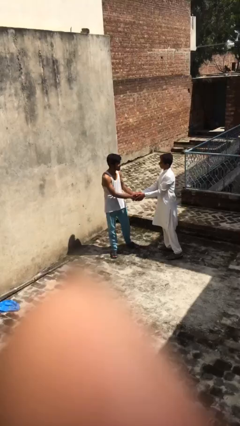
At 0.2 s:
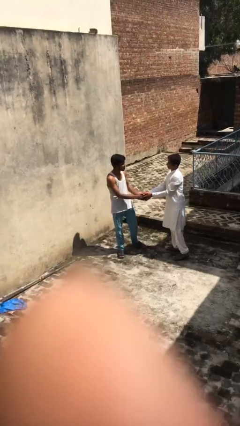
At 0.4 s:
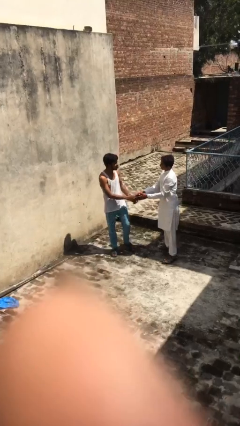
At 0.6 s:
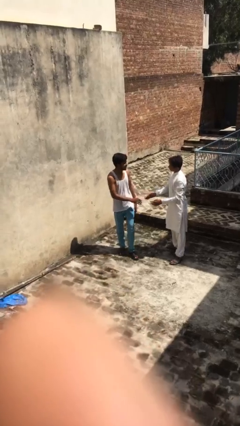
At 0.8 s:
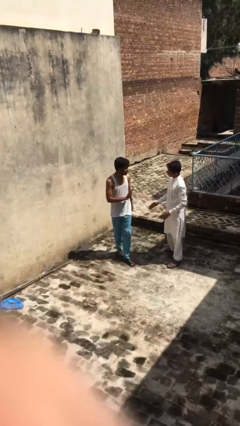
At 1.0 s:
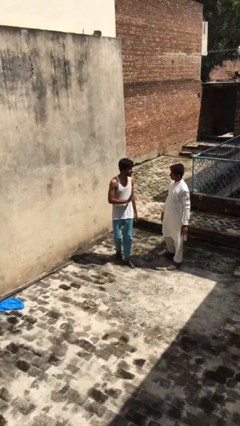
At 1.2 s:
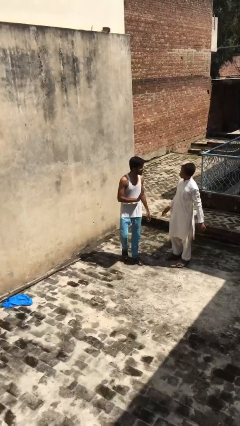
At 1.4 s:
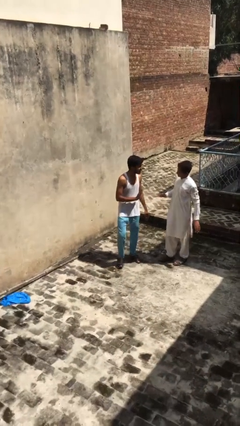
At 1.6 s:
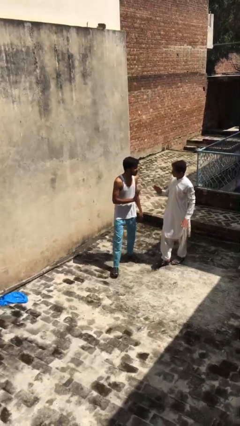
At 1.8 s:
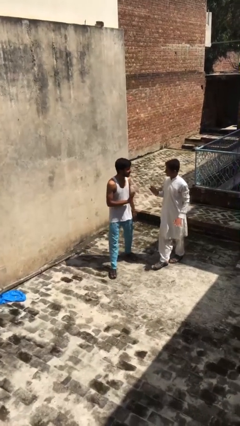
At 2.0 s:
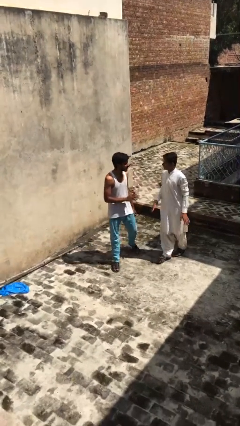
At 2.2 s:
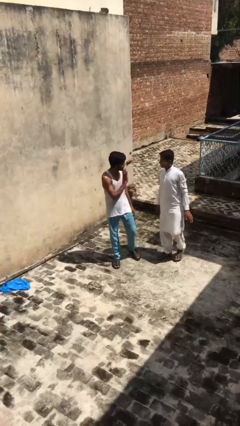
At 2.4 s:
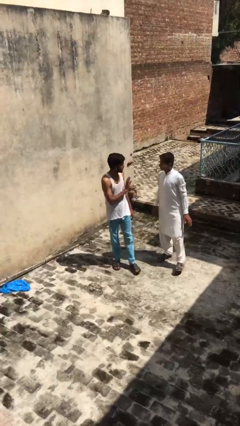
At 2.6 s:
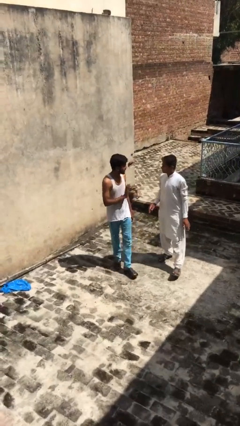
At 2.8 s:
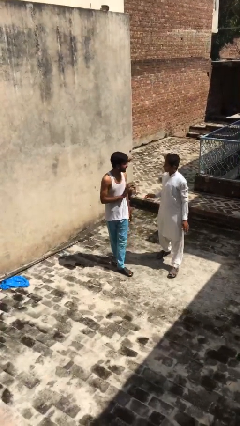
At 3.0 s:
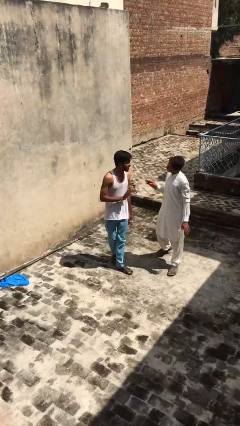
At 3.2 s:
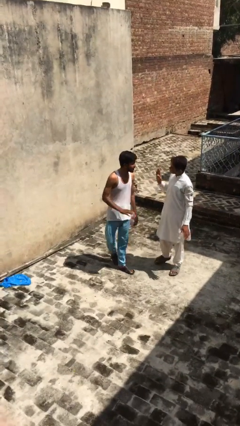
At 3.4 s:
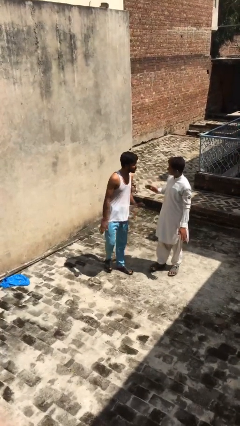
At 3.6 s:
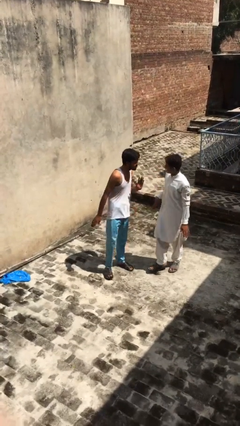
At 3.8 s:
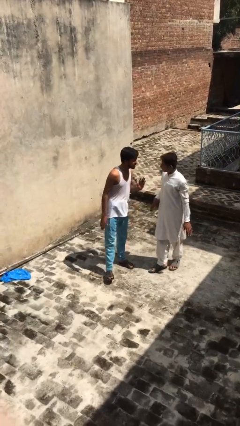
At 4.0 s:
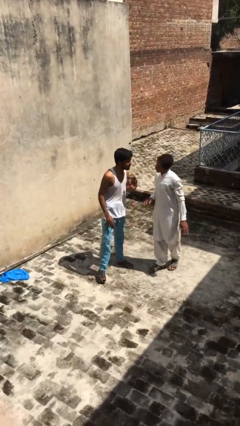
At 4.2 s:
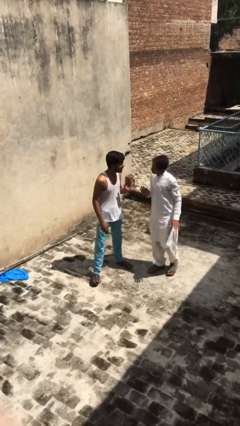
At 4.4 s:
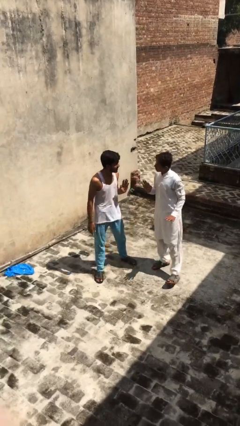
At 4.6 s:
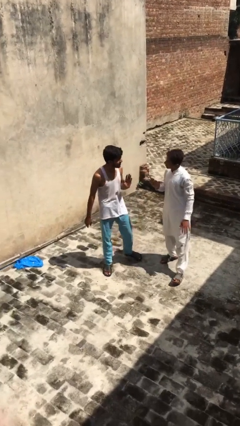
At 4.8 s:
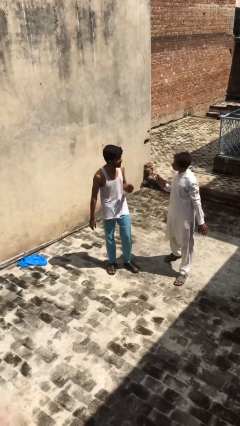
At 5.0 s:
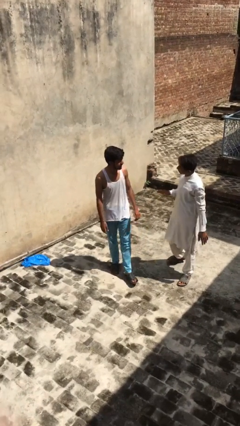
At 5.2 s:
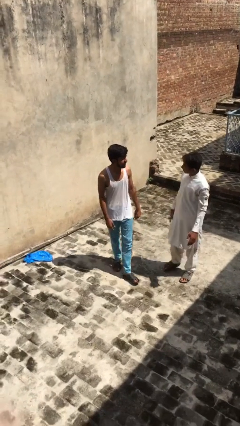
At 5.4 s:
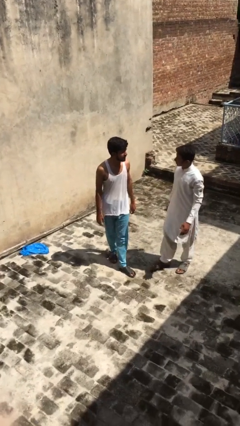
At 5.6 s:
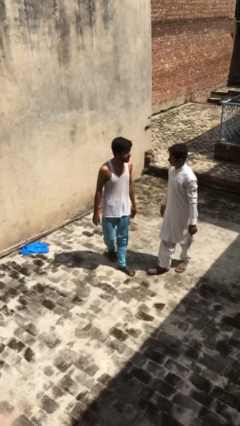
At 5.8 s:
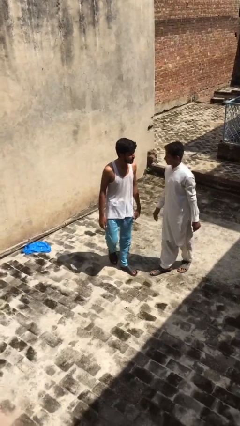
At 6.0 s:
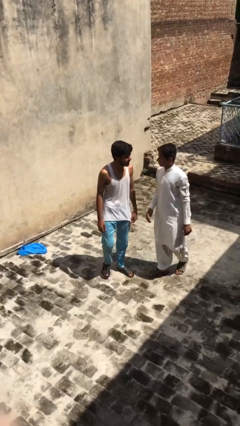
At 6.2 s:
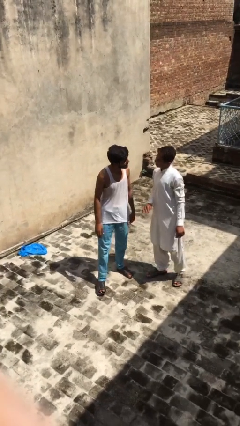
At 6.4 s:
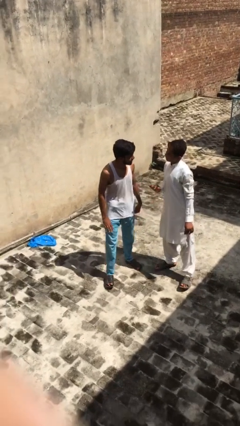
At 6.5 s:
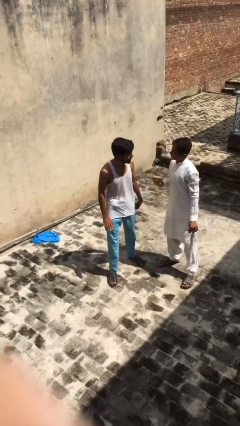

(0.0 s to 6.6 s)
person talks to person

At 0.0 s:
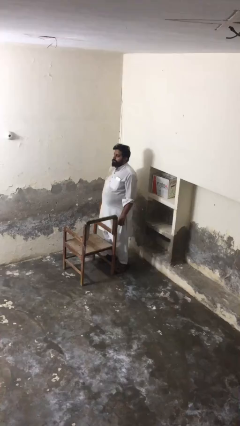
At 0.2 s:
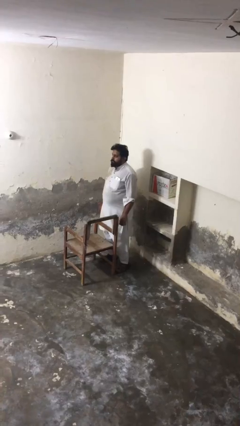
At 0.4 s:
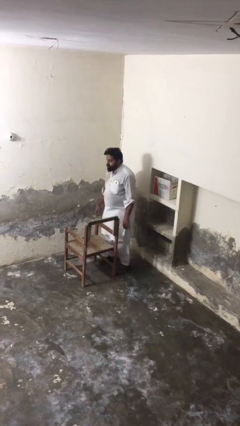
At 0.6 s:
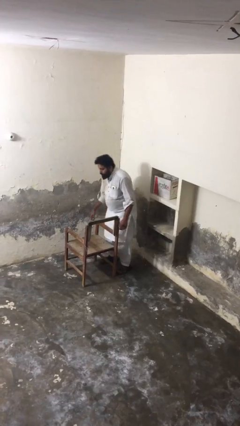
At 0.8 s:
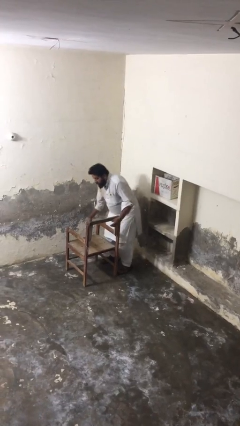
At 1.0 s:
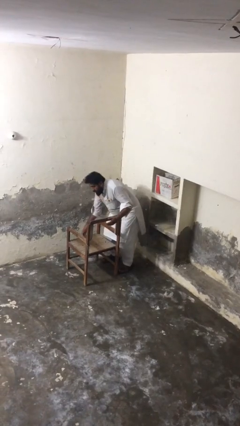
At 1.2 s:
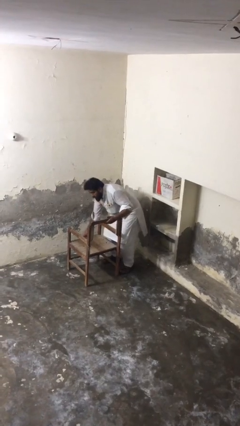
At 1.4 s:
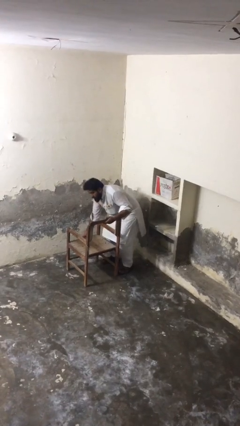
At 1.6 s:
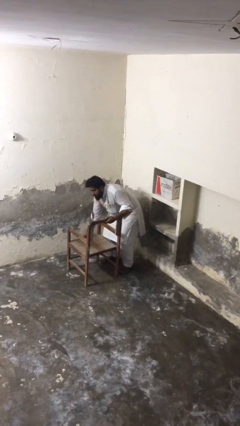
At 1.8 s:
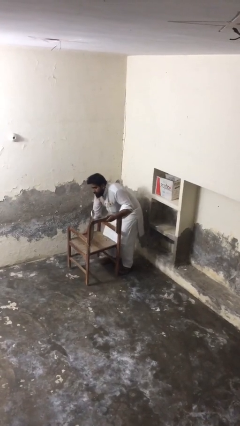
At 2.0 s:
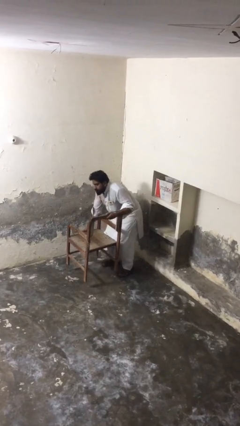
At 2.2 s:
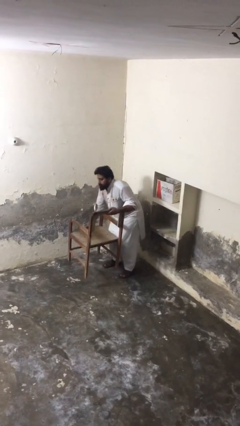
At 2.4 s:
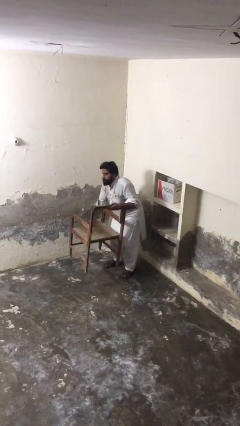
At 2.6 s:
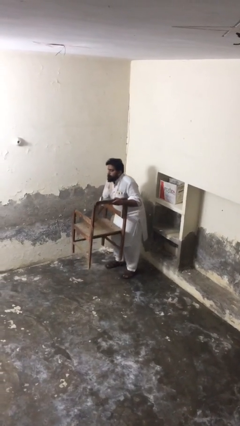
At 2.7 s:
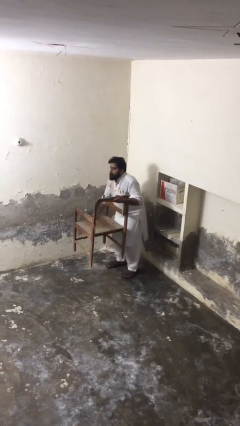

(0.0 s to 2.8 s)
person picks up object from floor

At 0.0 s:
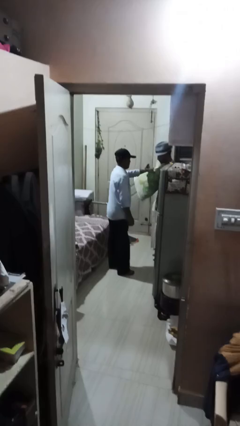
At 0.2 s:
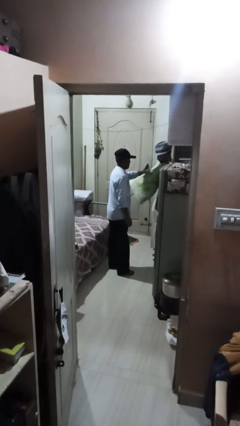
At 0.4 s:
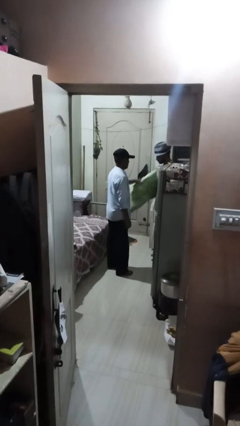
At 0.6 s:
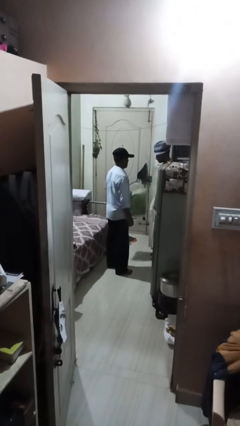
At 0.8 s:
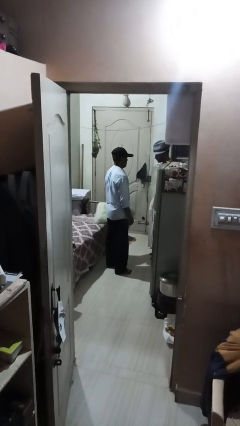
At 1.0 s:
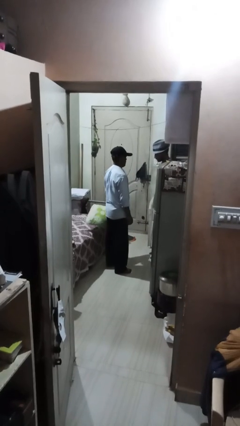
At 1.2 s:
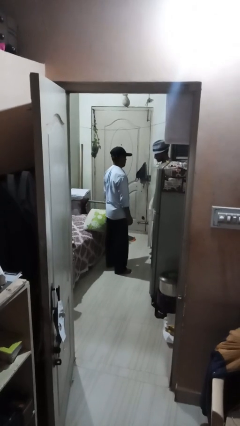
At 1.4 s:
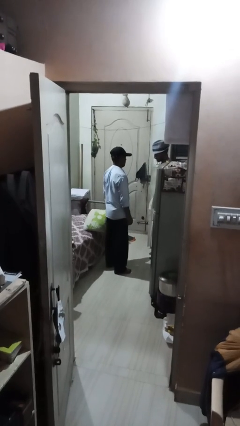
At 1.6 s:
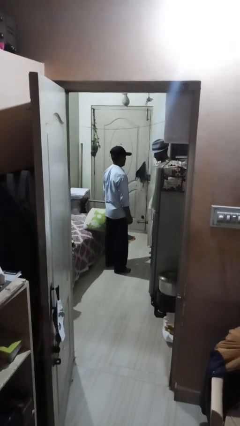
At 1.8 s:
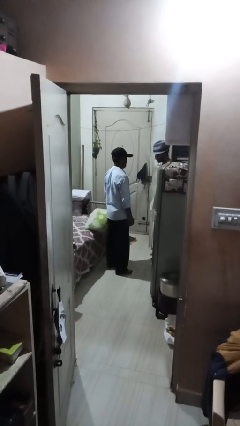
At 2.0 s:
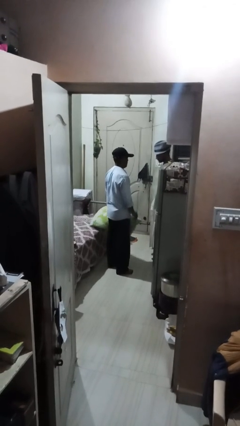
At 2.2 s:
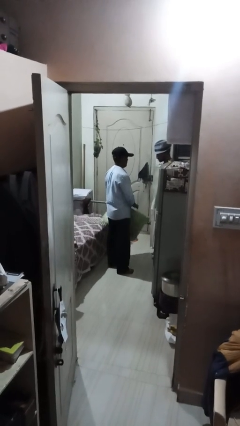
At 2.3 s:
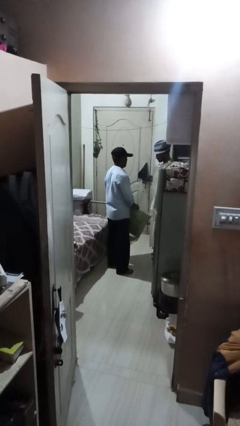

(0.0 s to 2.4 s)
person hits person with pillow

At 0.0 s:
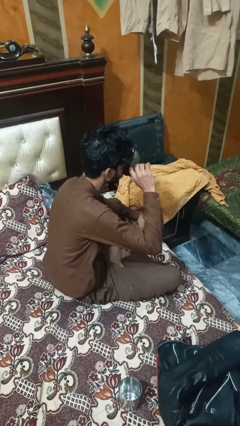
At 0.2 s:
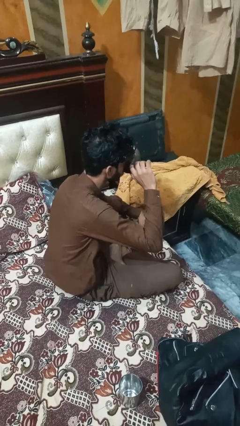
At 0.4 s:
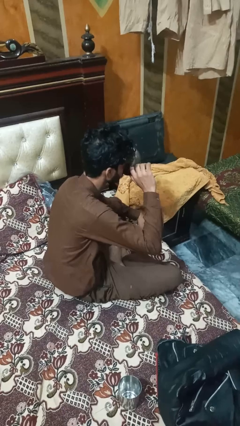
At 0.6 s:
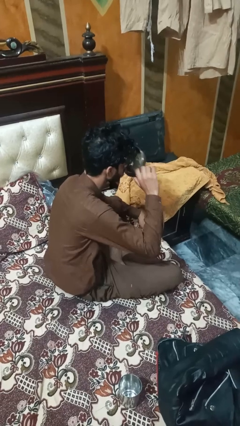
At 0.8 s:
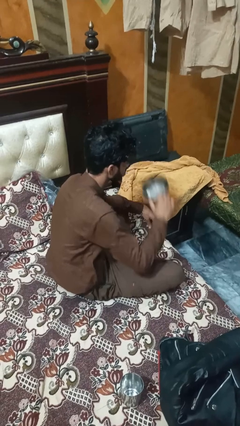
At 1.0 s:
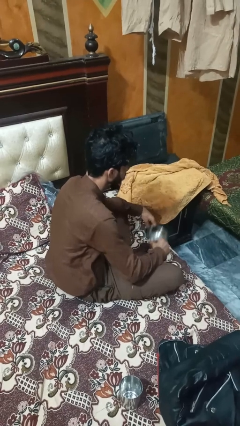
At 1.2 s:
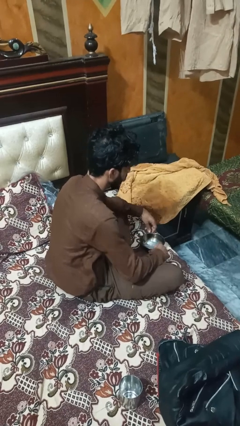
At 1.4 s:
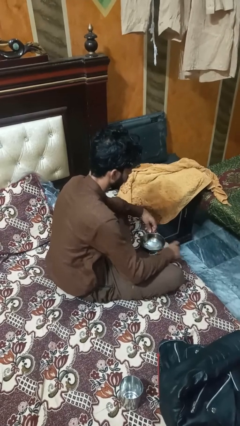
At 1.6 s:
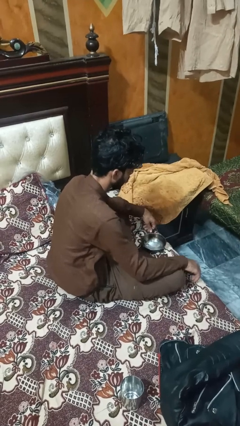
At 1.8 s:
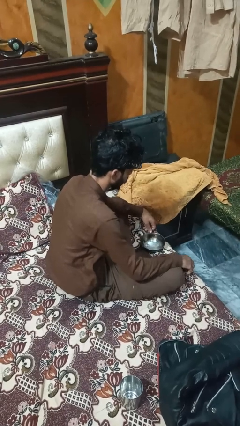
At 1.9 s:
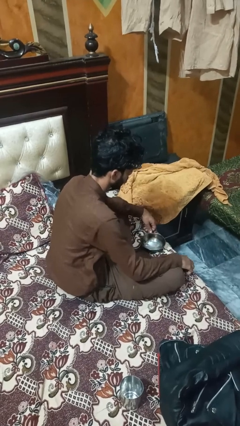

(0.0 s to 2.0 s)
person puts down object on table

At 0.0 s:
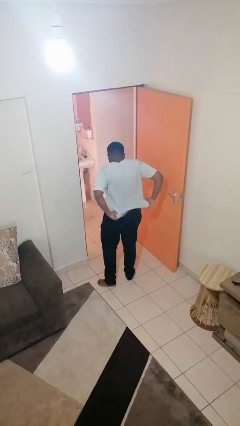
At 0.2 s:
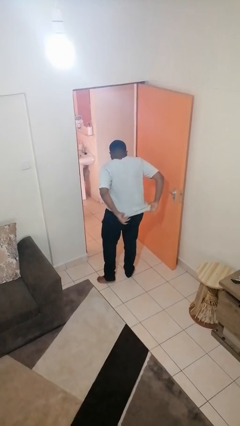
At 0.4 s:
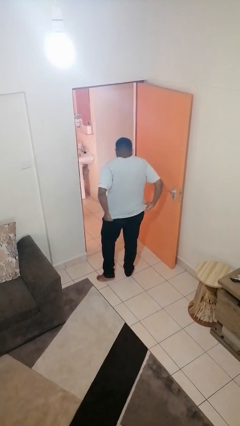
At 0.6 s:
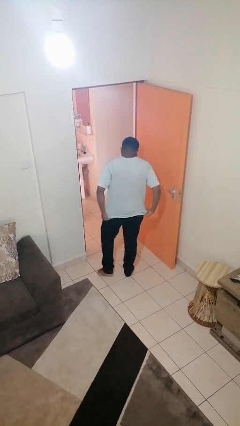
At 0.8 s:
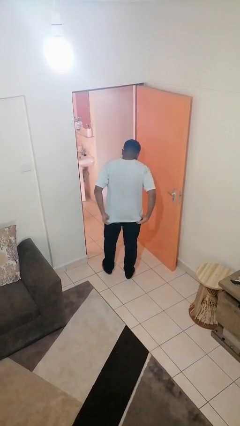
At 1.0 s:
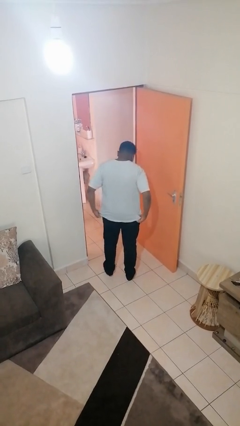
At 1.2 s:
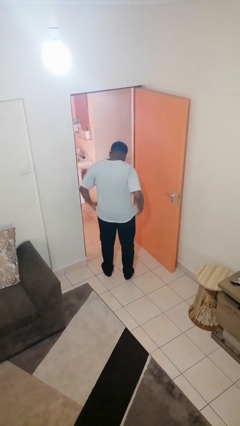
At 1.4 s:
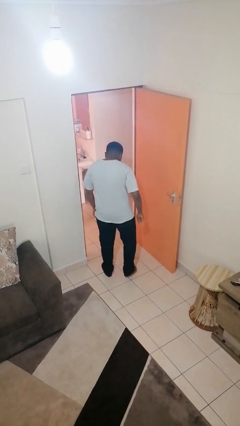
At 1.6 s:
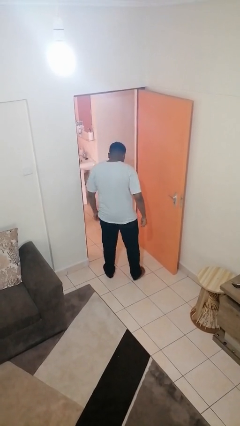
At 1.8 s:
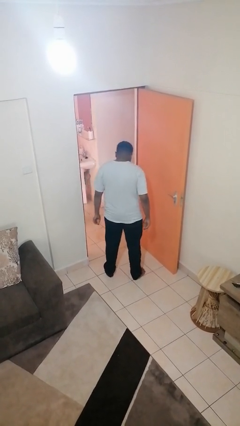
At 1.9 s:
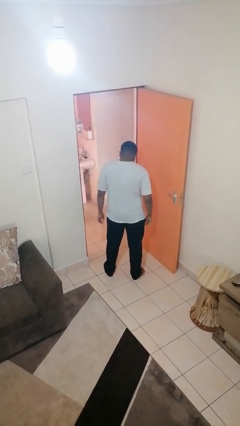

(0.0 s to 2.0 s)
person untucks shirt

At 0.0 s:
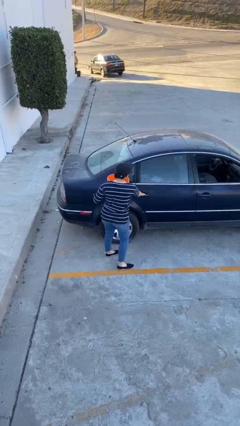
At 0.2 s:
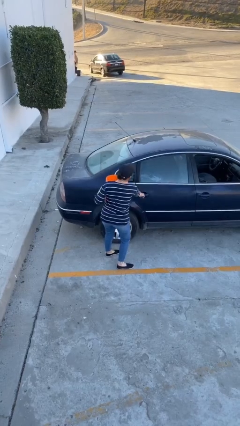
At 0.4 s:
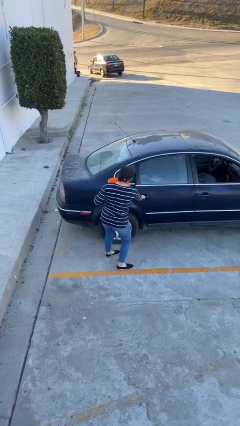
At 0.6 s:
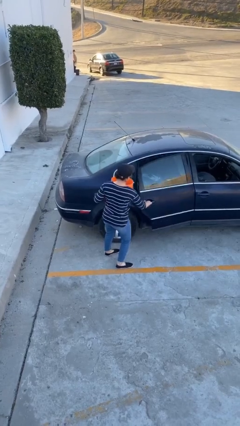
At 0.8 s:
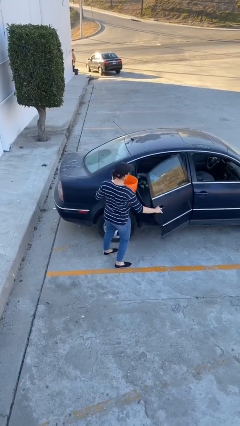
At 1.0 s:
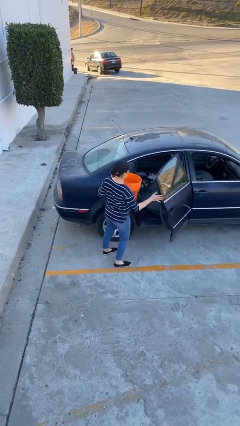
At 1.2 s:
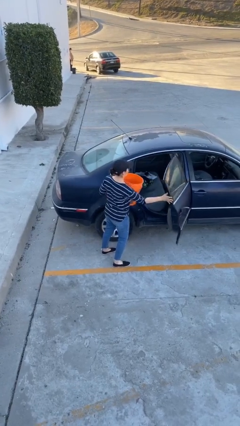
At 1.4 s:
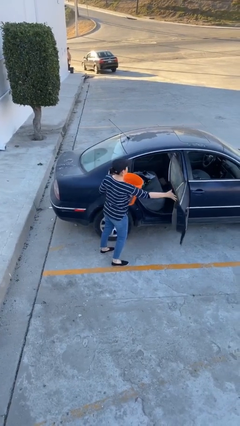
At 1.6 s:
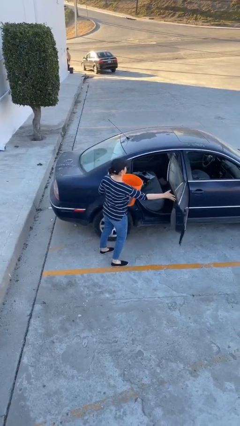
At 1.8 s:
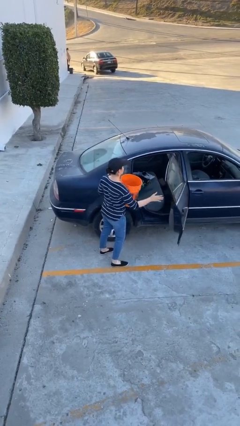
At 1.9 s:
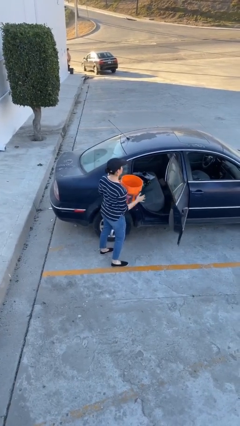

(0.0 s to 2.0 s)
person opens car door
